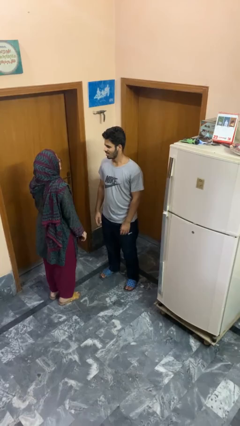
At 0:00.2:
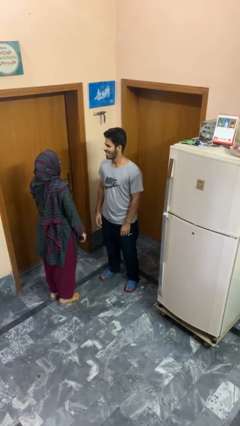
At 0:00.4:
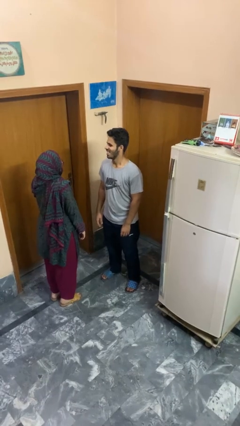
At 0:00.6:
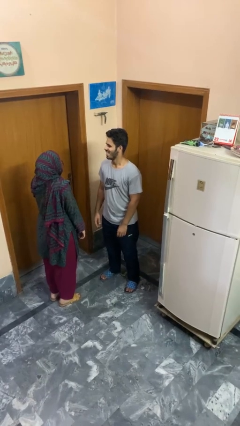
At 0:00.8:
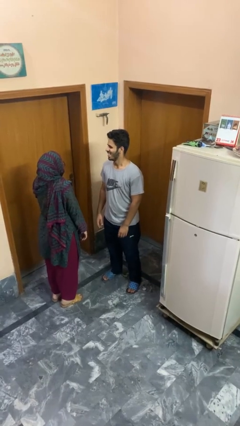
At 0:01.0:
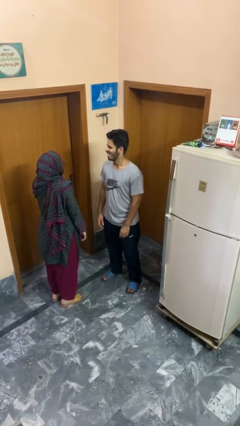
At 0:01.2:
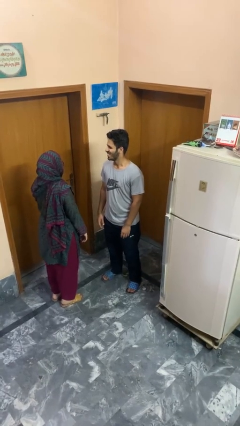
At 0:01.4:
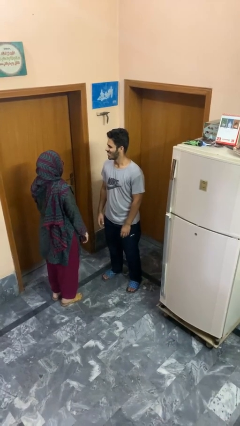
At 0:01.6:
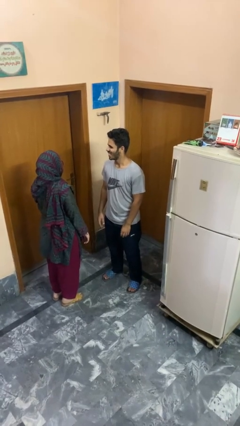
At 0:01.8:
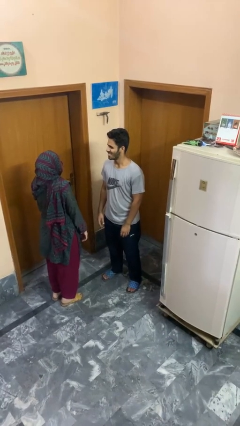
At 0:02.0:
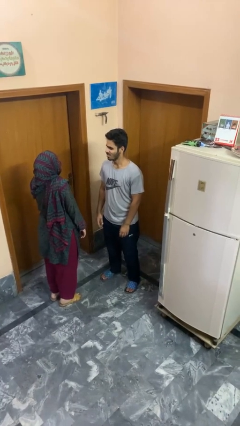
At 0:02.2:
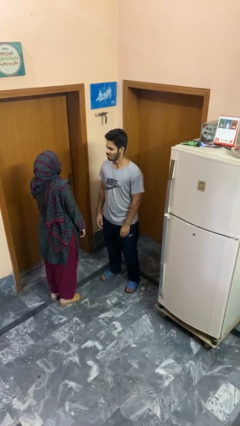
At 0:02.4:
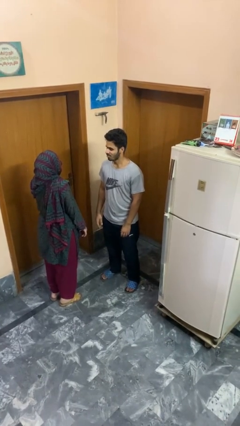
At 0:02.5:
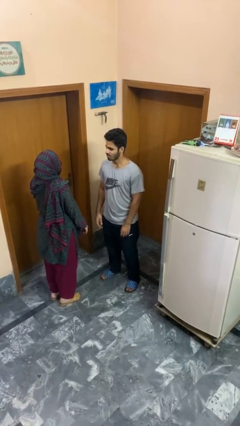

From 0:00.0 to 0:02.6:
person laughs with person

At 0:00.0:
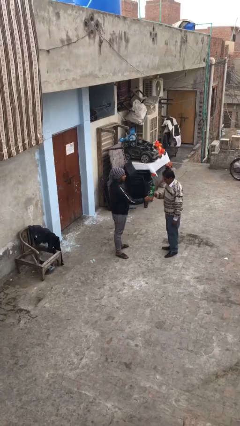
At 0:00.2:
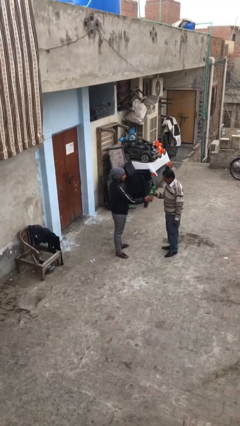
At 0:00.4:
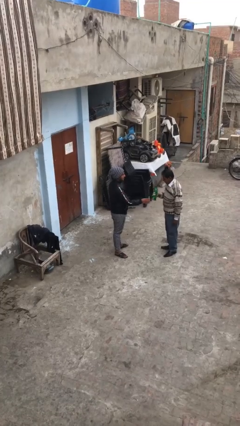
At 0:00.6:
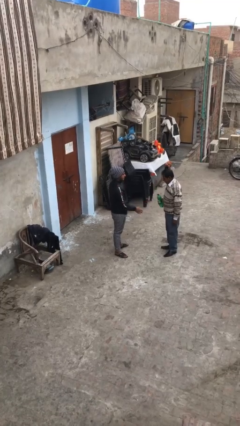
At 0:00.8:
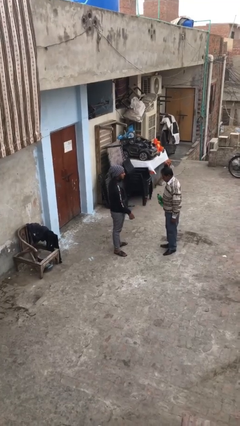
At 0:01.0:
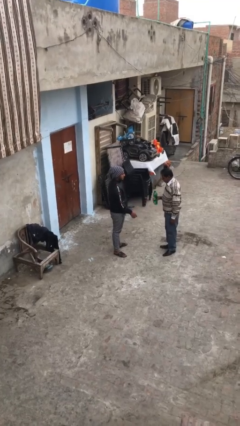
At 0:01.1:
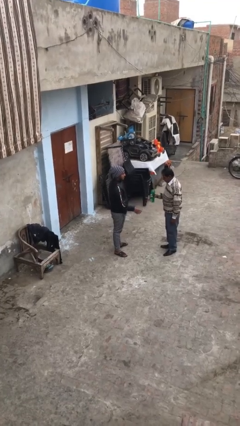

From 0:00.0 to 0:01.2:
person transfers object to person

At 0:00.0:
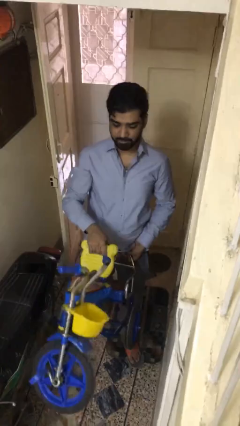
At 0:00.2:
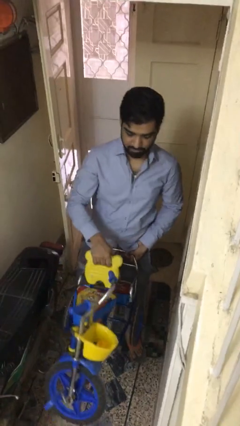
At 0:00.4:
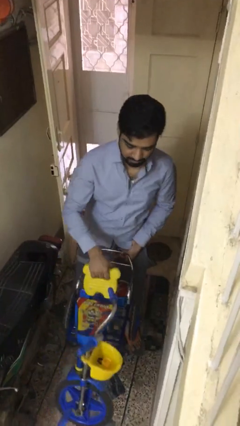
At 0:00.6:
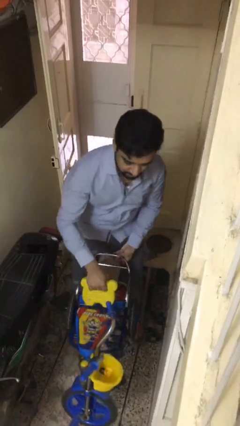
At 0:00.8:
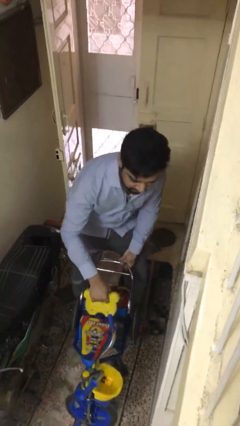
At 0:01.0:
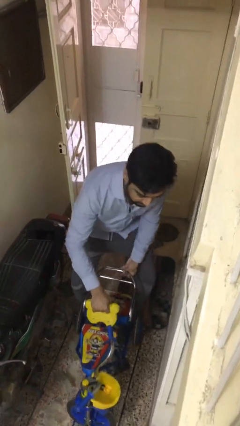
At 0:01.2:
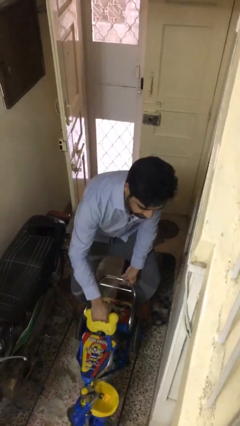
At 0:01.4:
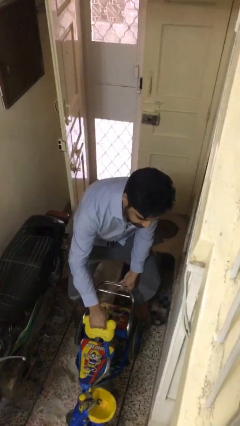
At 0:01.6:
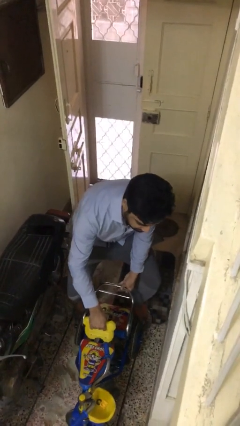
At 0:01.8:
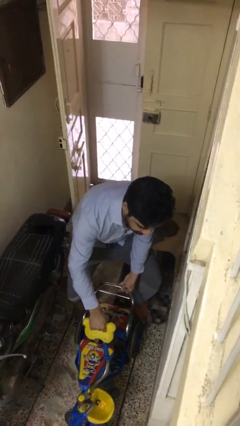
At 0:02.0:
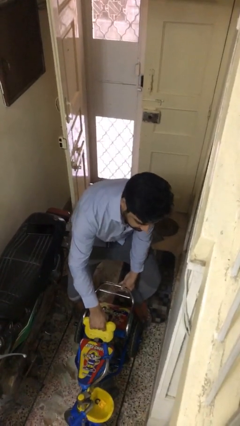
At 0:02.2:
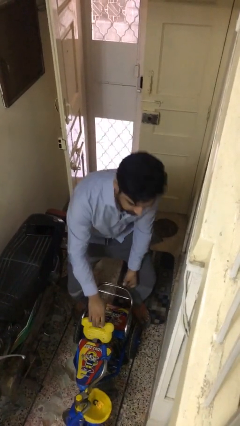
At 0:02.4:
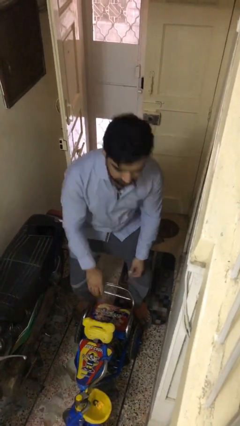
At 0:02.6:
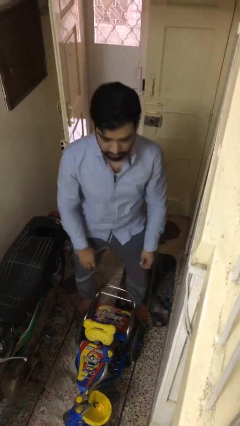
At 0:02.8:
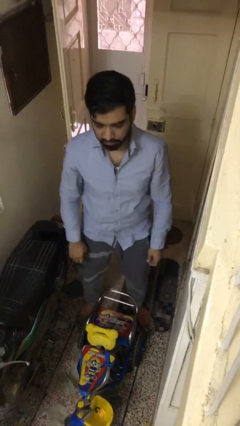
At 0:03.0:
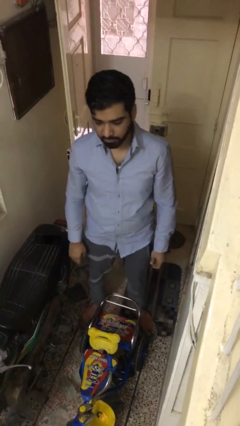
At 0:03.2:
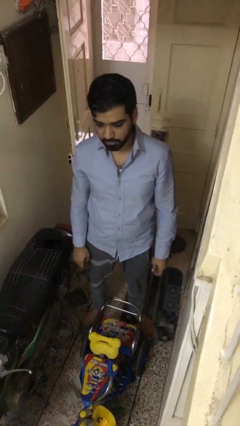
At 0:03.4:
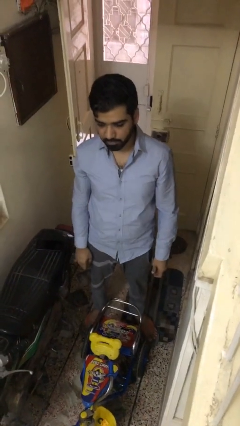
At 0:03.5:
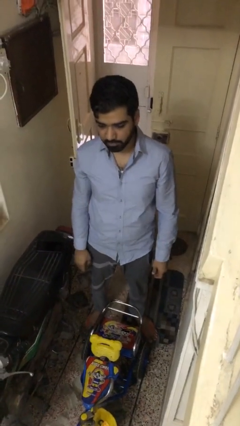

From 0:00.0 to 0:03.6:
person puts down object on floor

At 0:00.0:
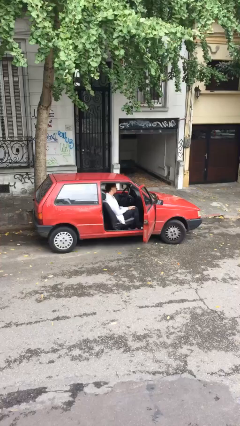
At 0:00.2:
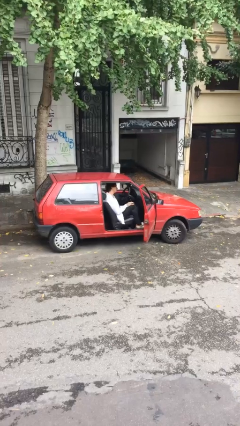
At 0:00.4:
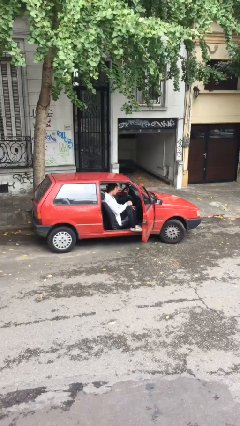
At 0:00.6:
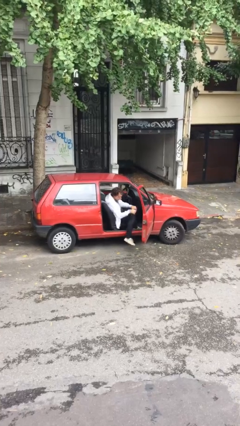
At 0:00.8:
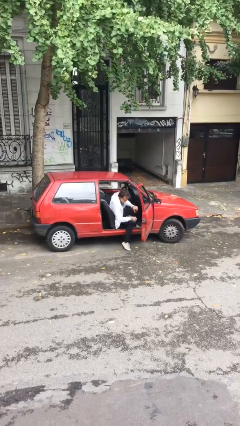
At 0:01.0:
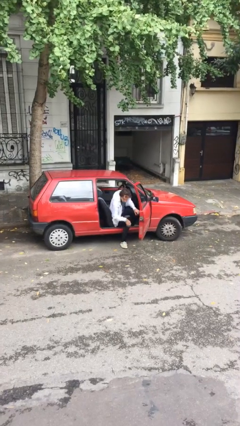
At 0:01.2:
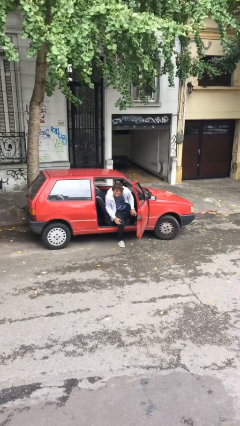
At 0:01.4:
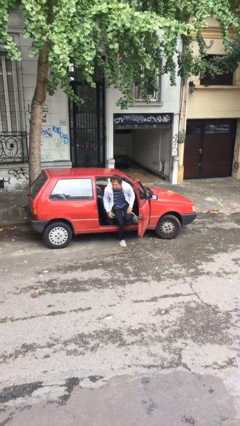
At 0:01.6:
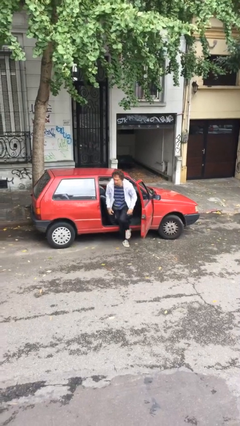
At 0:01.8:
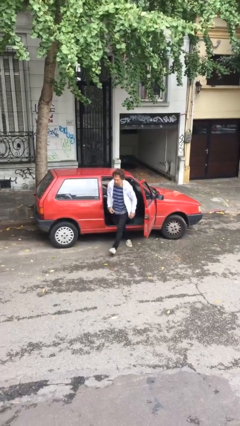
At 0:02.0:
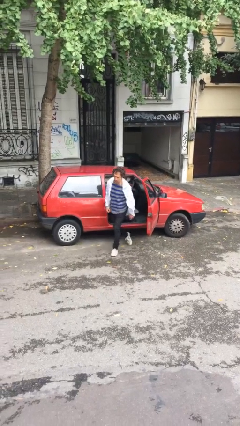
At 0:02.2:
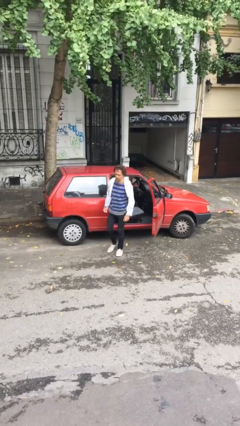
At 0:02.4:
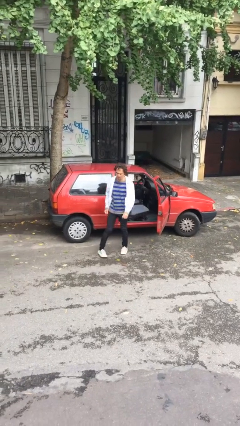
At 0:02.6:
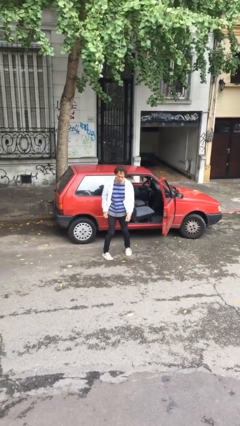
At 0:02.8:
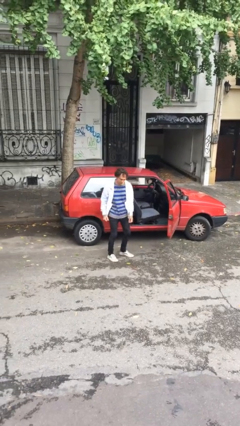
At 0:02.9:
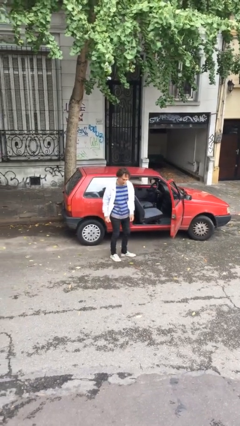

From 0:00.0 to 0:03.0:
person exits car

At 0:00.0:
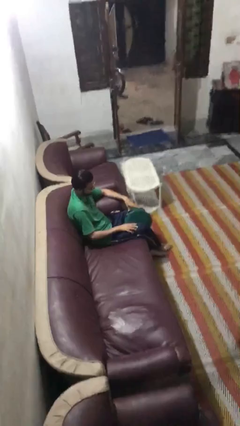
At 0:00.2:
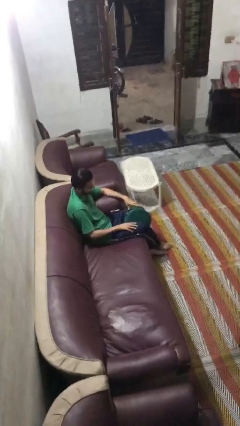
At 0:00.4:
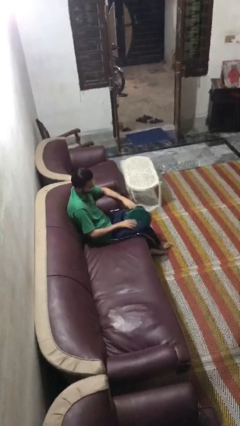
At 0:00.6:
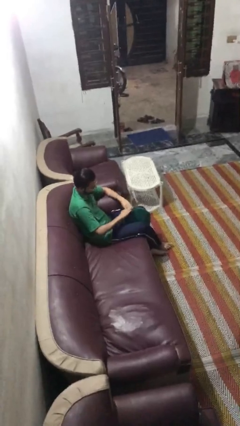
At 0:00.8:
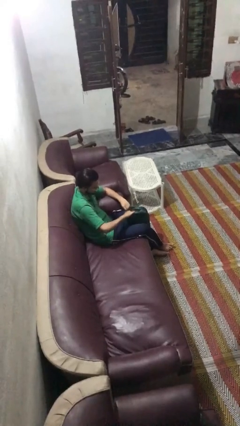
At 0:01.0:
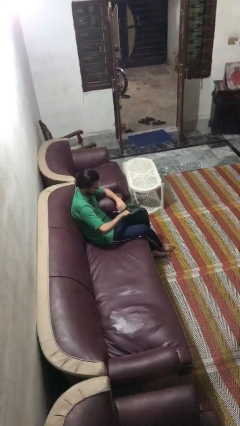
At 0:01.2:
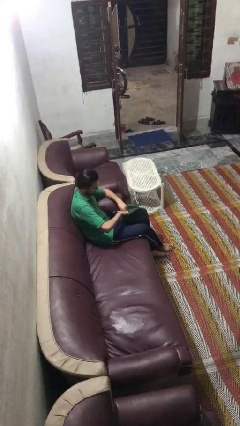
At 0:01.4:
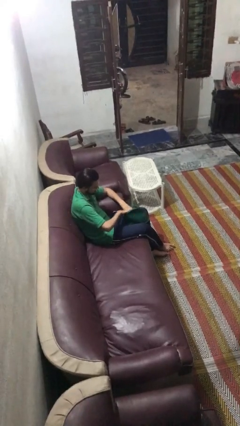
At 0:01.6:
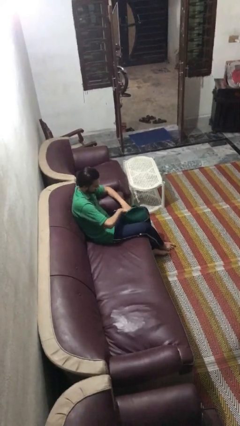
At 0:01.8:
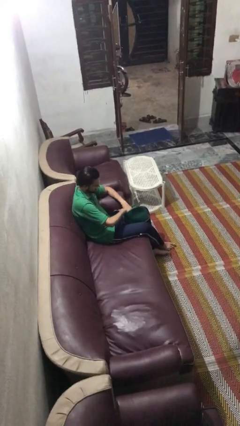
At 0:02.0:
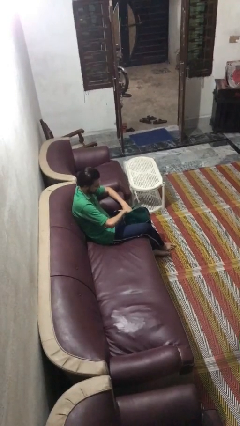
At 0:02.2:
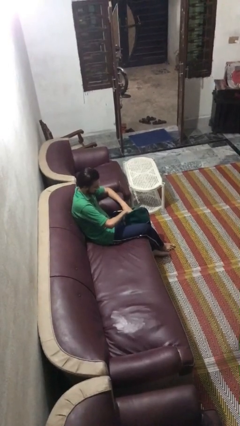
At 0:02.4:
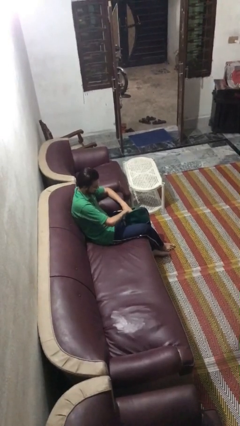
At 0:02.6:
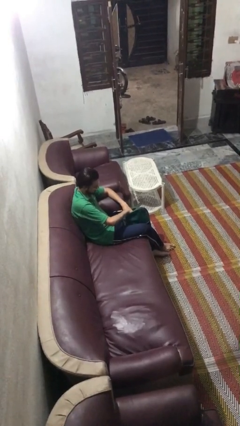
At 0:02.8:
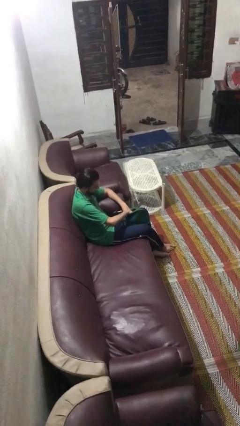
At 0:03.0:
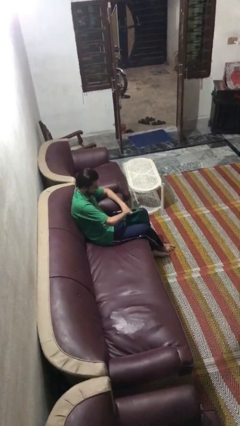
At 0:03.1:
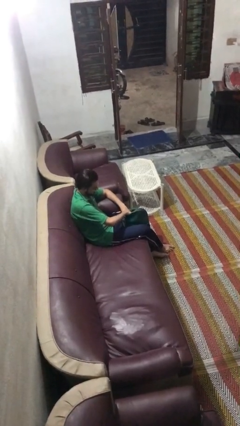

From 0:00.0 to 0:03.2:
person searches in purse

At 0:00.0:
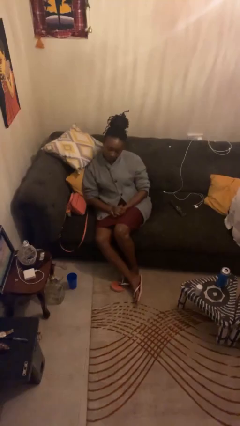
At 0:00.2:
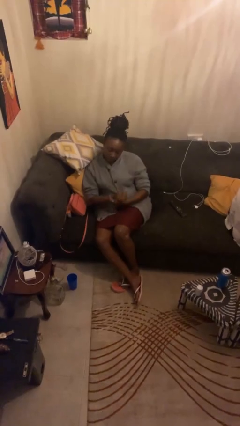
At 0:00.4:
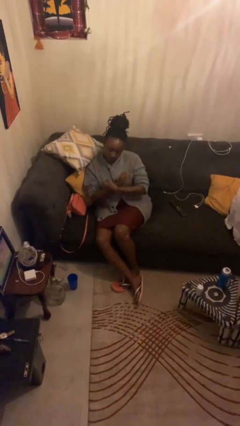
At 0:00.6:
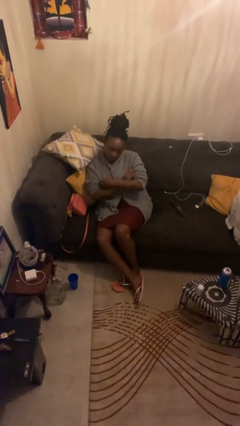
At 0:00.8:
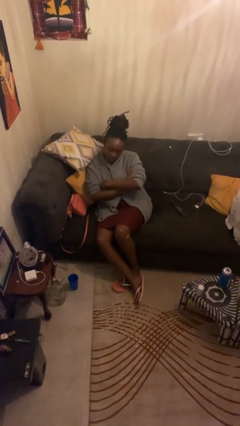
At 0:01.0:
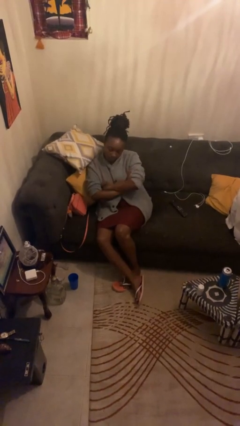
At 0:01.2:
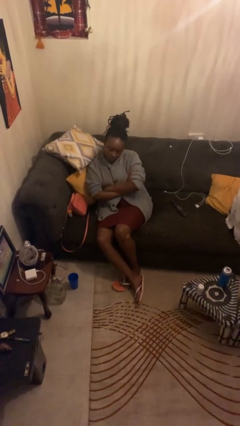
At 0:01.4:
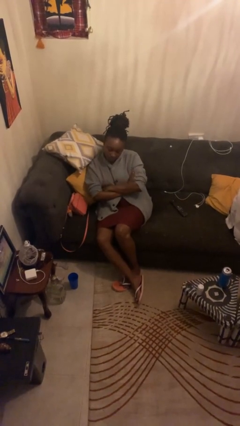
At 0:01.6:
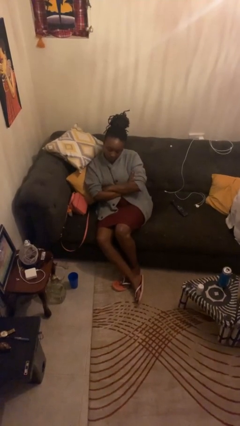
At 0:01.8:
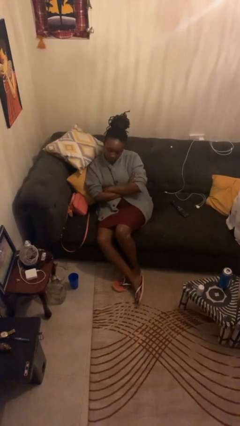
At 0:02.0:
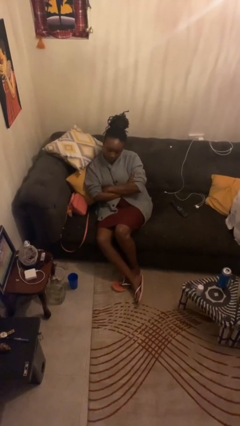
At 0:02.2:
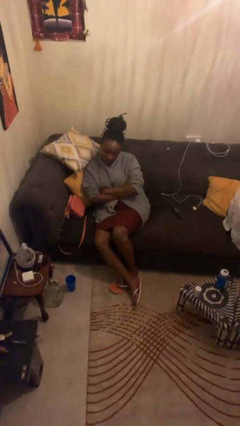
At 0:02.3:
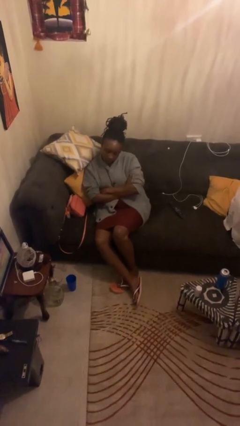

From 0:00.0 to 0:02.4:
person crosses arms

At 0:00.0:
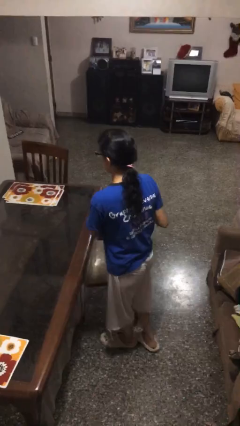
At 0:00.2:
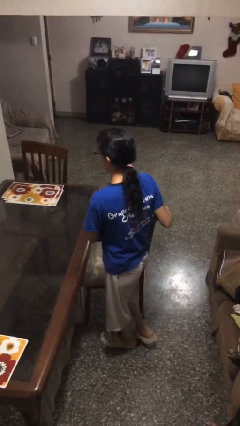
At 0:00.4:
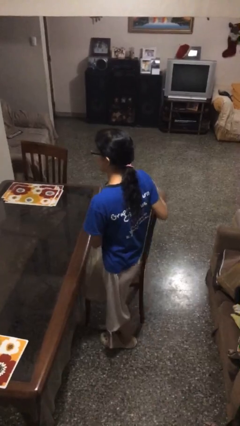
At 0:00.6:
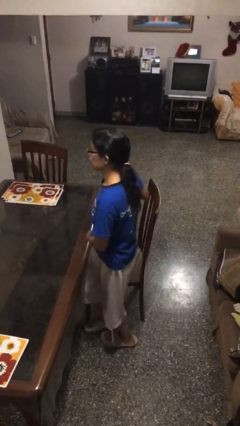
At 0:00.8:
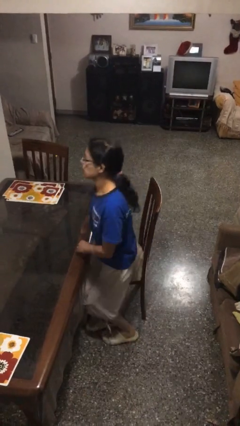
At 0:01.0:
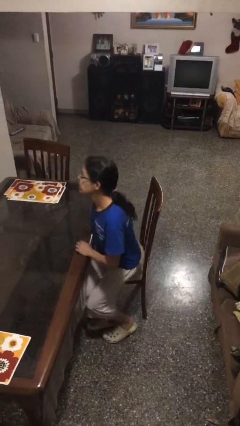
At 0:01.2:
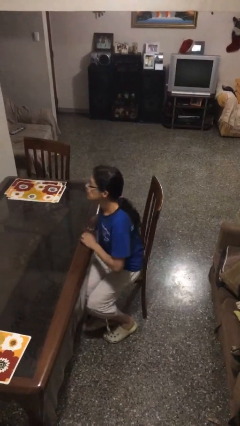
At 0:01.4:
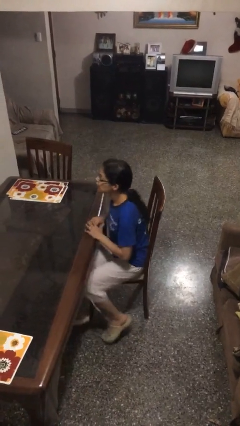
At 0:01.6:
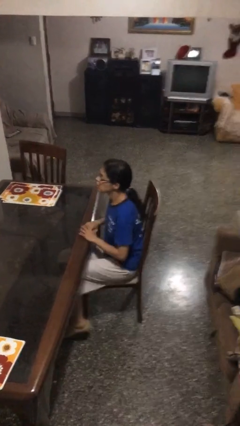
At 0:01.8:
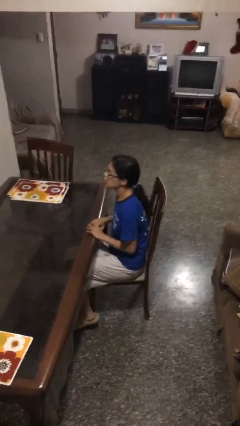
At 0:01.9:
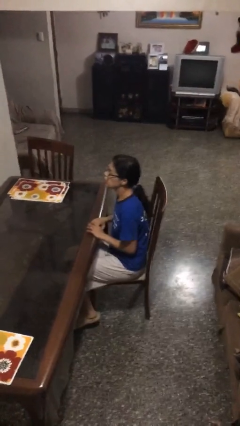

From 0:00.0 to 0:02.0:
person sits down
